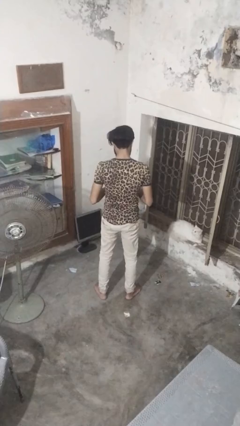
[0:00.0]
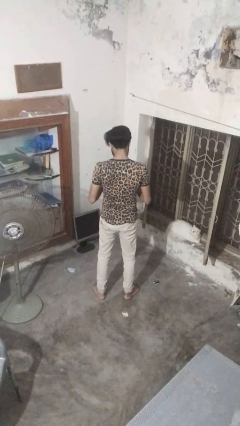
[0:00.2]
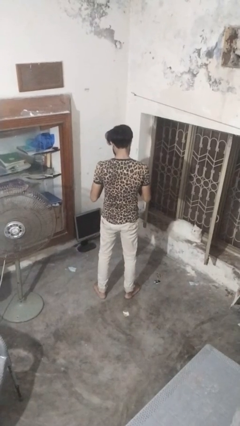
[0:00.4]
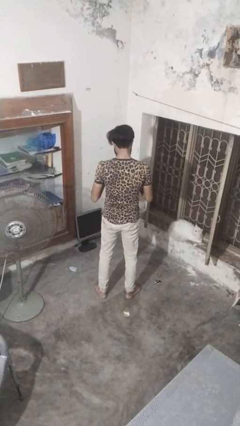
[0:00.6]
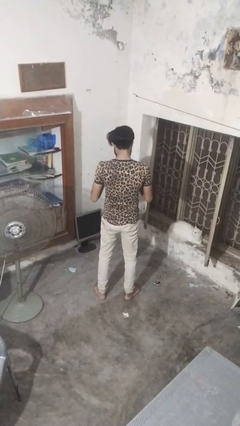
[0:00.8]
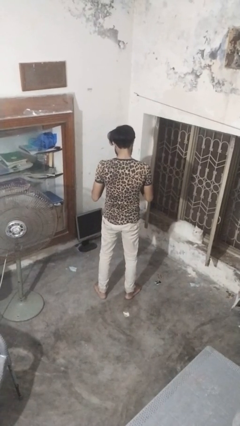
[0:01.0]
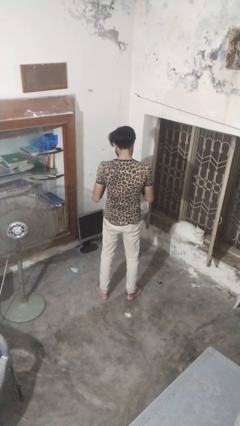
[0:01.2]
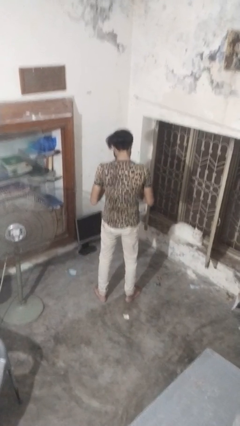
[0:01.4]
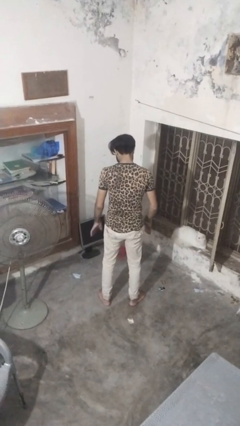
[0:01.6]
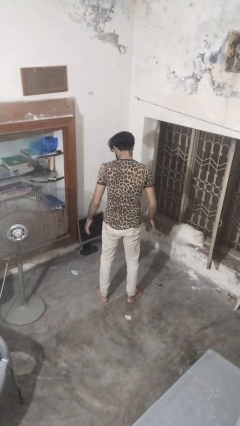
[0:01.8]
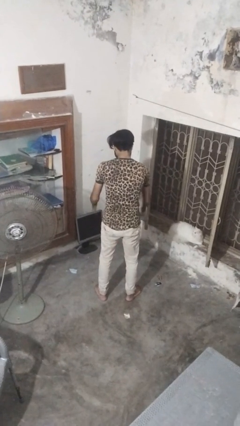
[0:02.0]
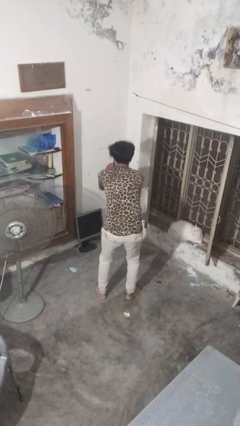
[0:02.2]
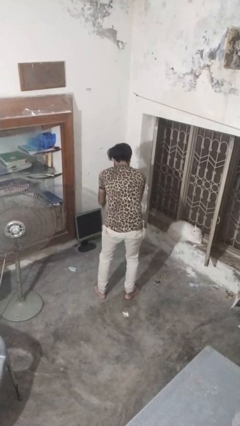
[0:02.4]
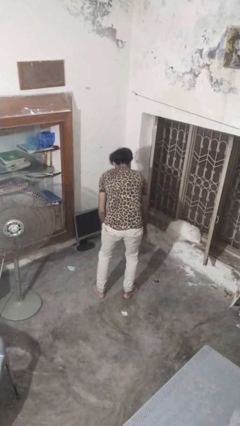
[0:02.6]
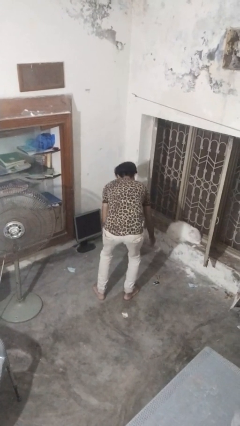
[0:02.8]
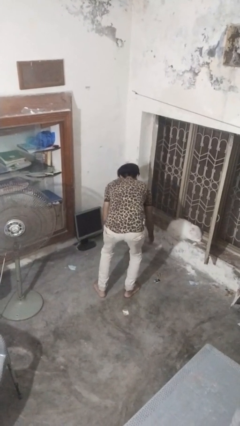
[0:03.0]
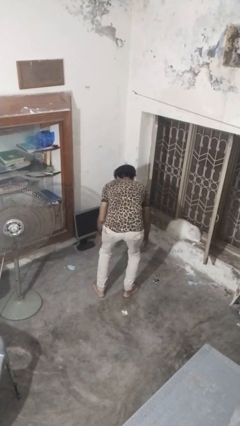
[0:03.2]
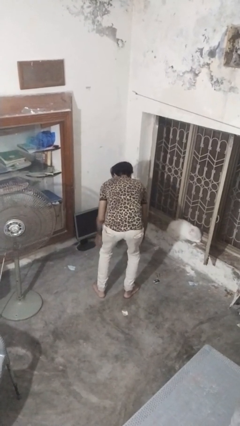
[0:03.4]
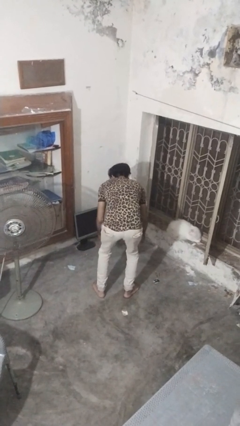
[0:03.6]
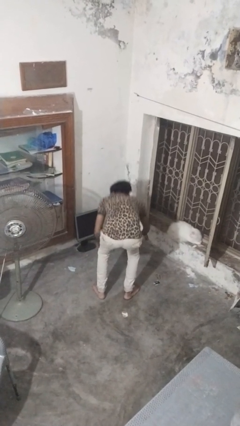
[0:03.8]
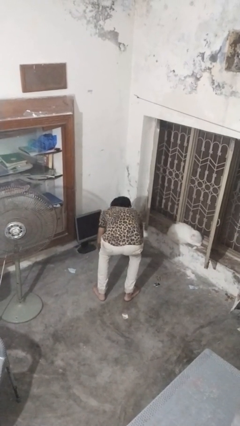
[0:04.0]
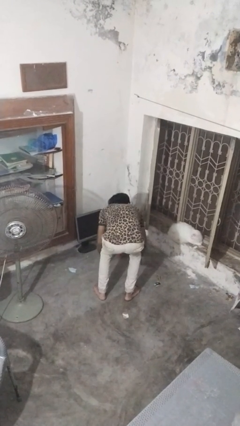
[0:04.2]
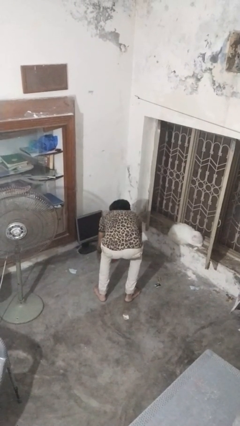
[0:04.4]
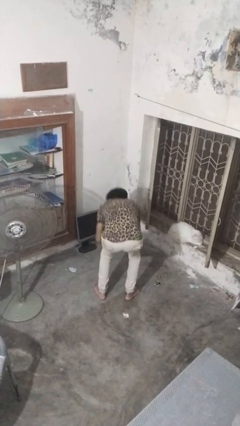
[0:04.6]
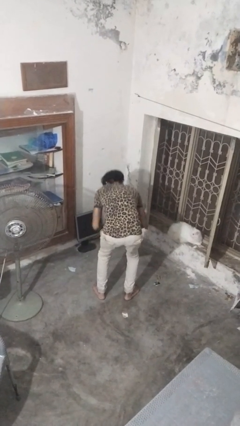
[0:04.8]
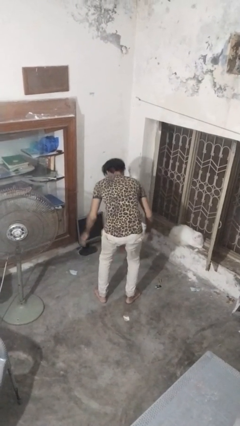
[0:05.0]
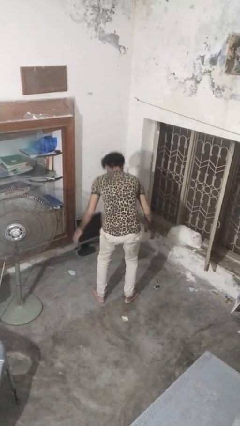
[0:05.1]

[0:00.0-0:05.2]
person bounces ball on floor

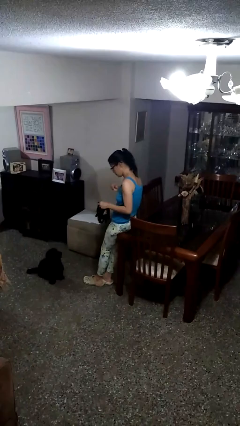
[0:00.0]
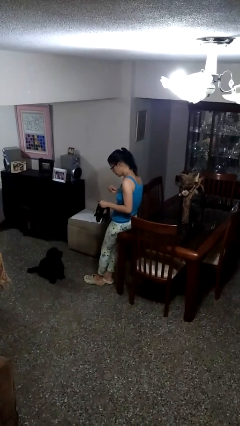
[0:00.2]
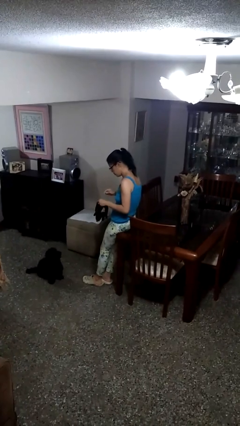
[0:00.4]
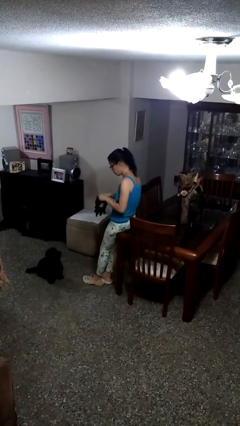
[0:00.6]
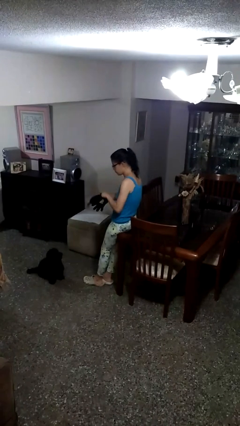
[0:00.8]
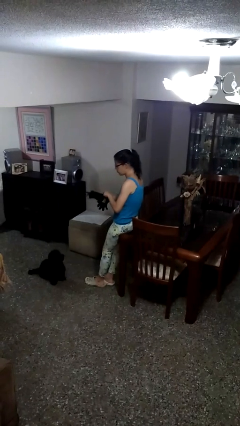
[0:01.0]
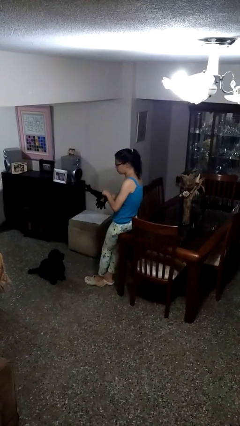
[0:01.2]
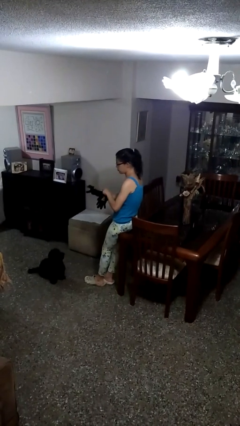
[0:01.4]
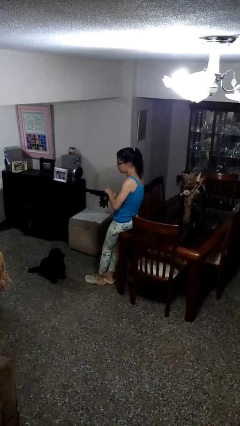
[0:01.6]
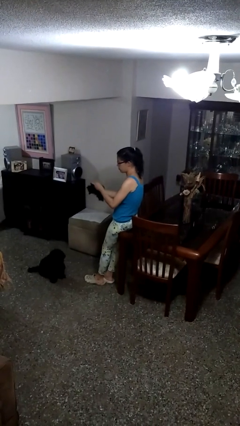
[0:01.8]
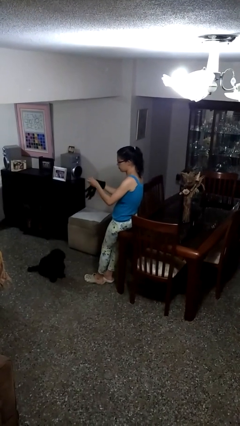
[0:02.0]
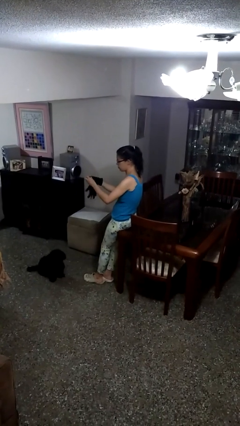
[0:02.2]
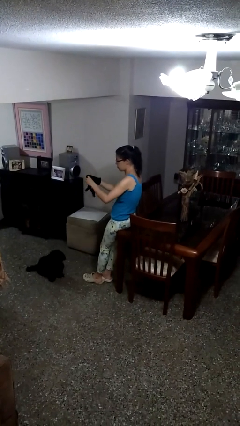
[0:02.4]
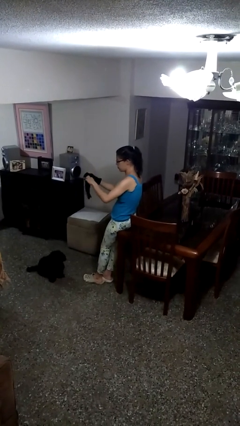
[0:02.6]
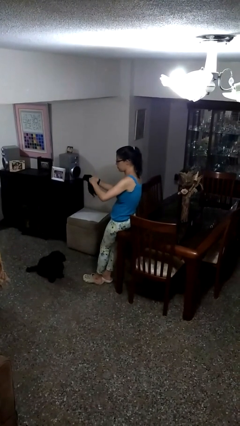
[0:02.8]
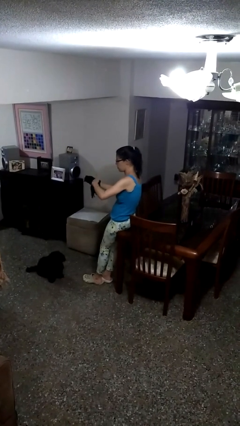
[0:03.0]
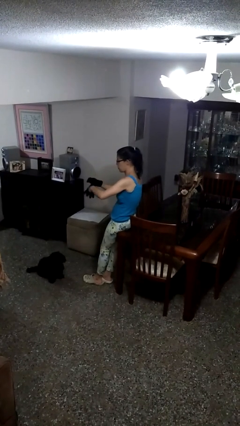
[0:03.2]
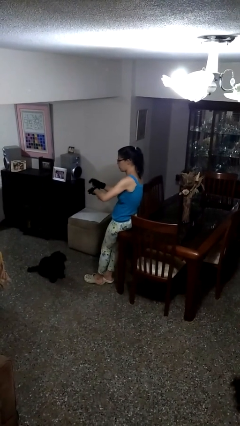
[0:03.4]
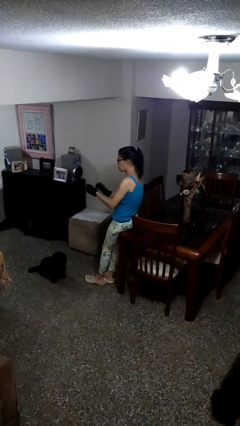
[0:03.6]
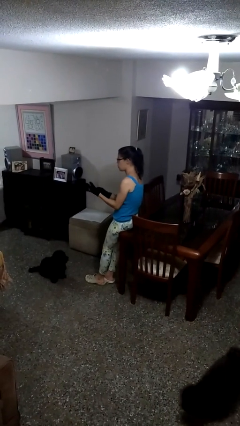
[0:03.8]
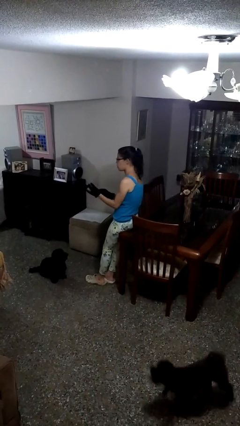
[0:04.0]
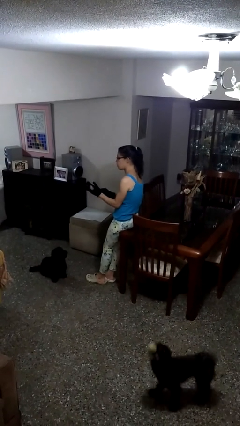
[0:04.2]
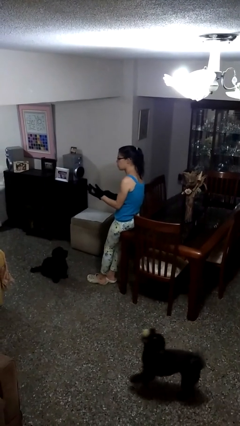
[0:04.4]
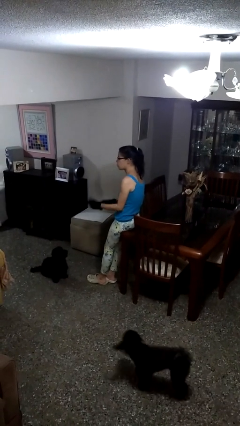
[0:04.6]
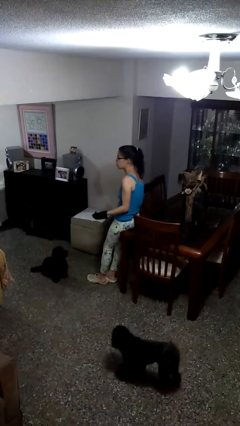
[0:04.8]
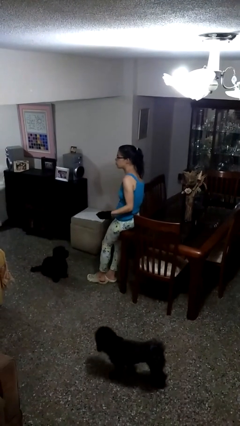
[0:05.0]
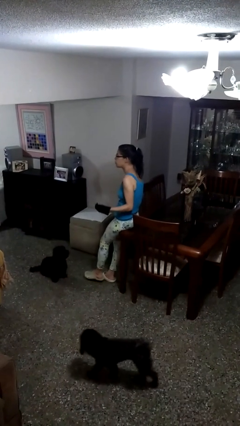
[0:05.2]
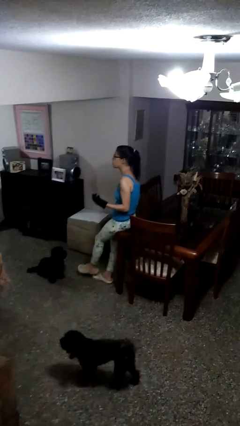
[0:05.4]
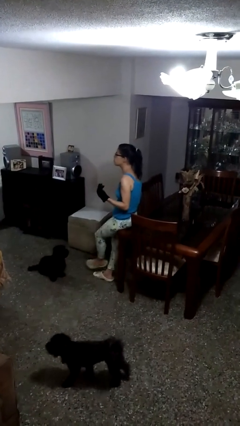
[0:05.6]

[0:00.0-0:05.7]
person puts on gloves

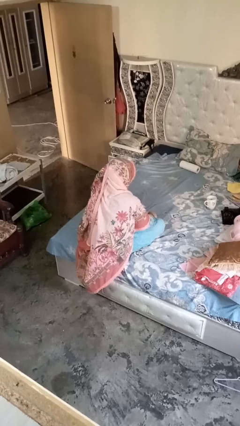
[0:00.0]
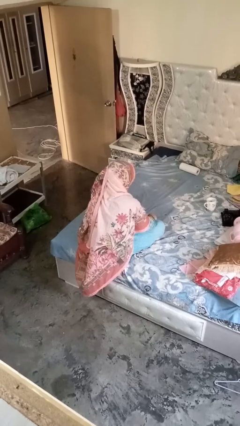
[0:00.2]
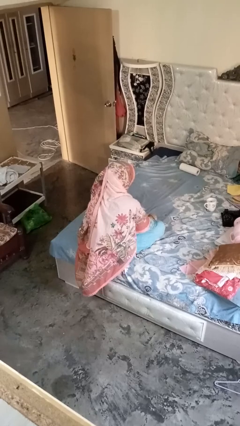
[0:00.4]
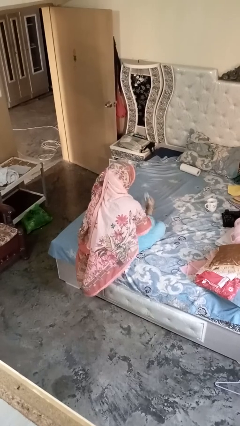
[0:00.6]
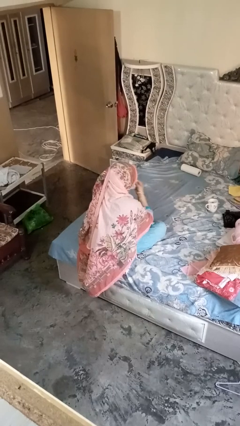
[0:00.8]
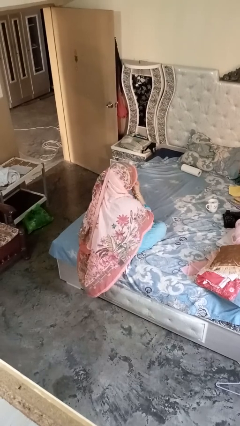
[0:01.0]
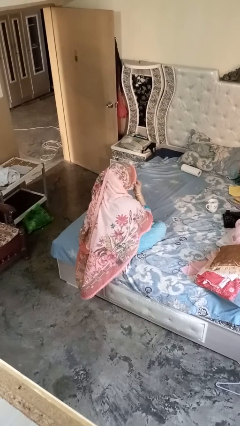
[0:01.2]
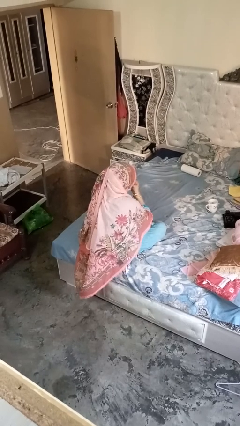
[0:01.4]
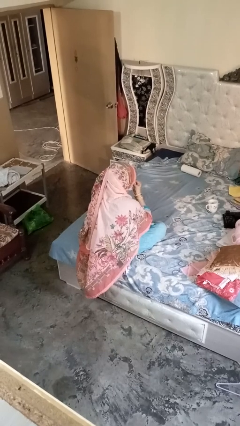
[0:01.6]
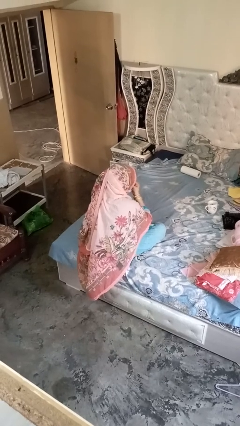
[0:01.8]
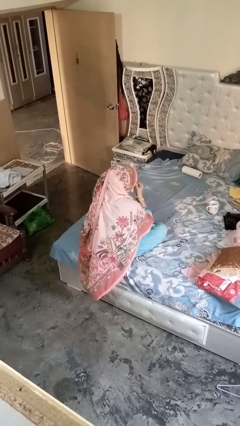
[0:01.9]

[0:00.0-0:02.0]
person blows nose

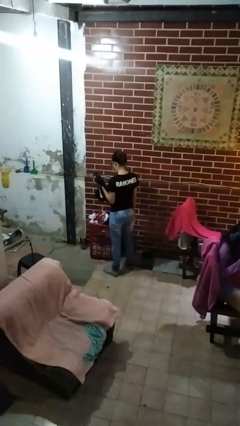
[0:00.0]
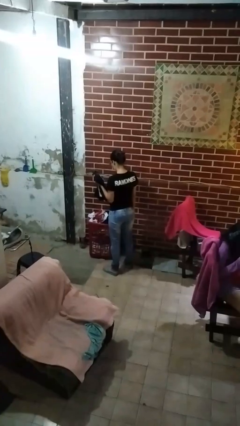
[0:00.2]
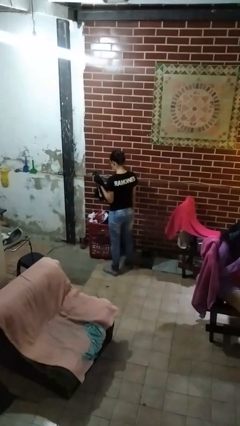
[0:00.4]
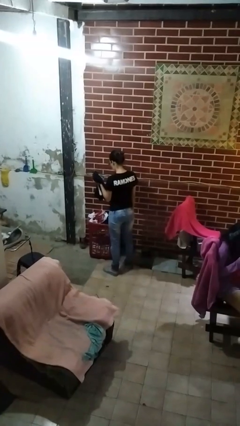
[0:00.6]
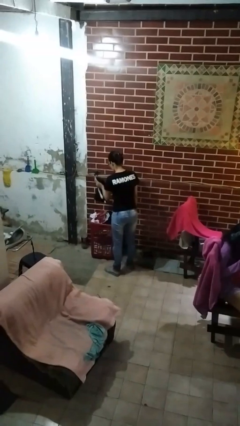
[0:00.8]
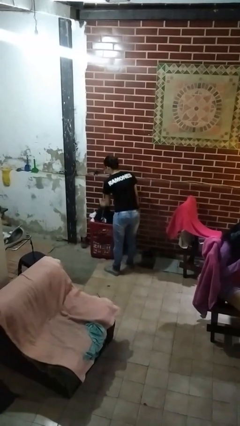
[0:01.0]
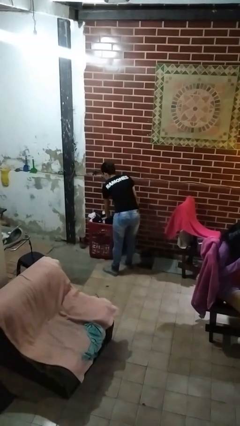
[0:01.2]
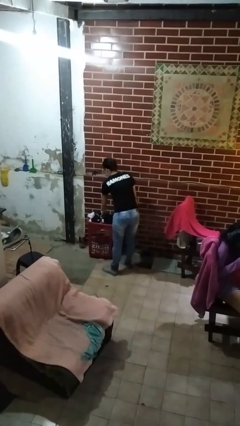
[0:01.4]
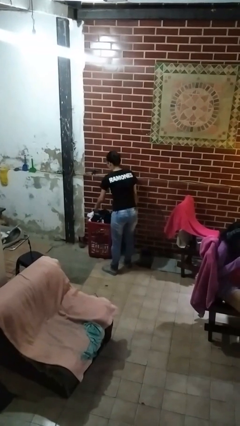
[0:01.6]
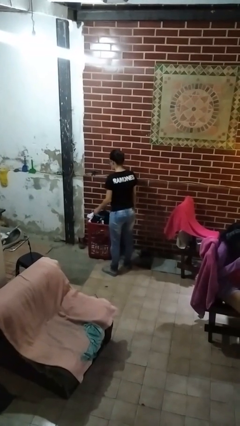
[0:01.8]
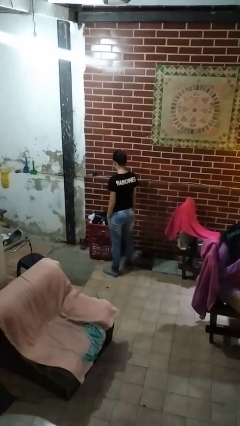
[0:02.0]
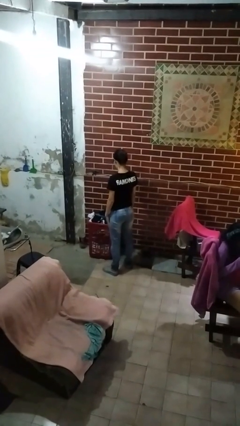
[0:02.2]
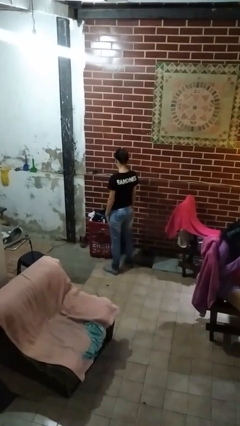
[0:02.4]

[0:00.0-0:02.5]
person puts object into basket

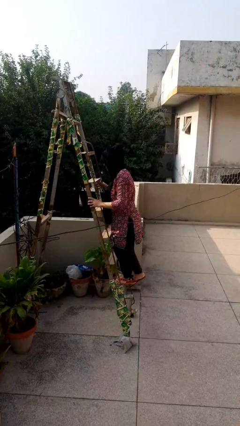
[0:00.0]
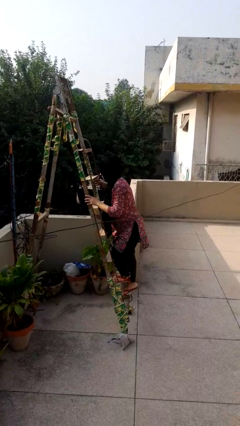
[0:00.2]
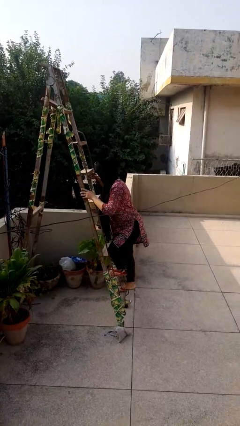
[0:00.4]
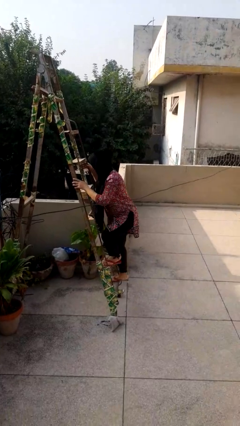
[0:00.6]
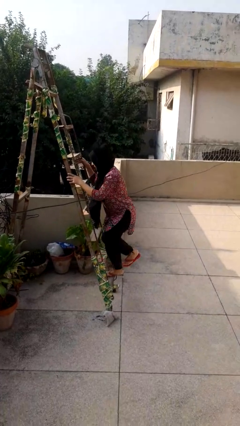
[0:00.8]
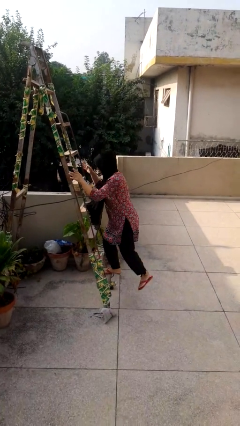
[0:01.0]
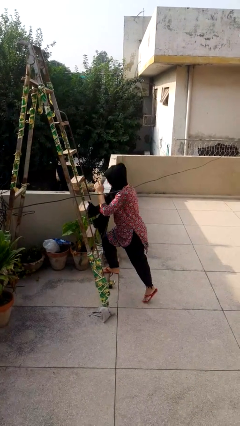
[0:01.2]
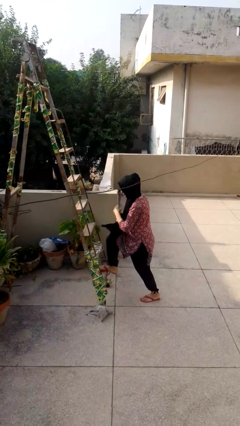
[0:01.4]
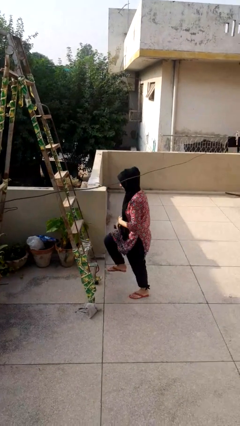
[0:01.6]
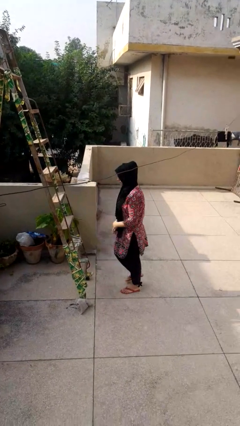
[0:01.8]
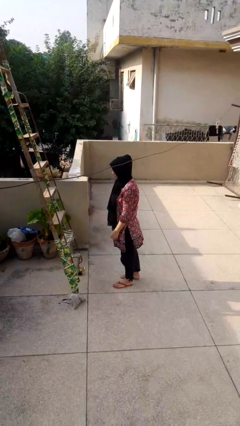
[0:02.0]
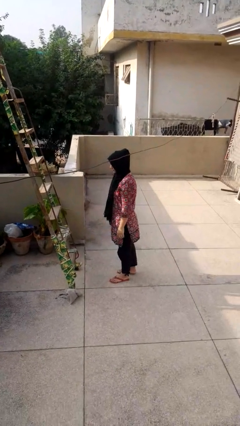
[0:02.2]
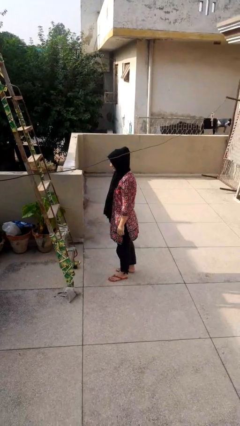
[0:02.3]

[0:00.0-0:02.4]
person climbs down ladder

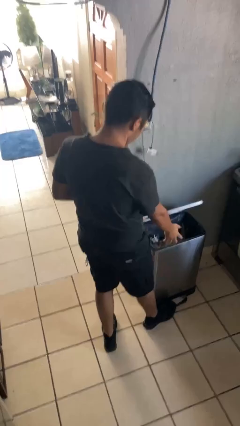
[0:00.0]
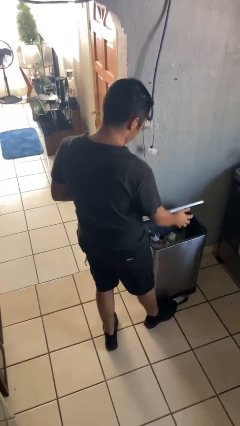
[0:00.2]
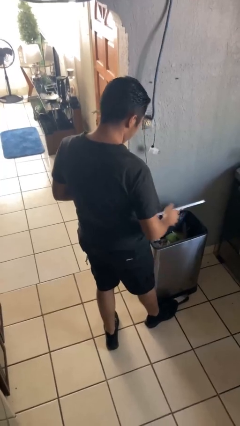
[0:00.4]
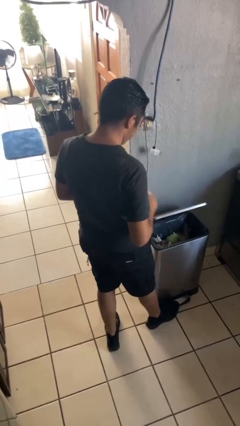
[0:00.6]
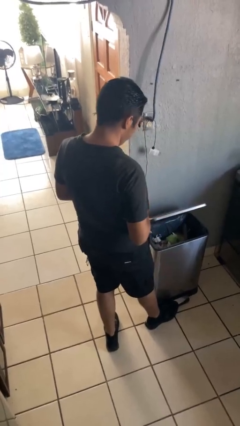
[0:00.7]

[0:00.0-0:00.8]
person discards trash
